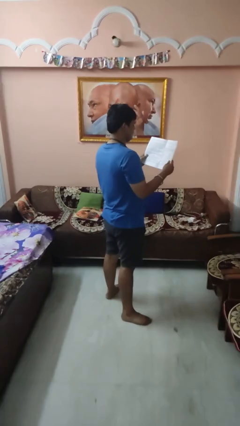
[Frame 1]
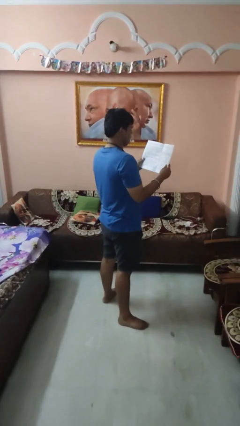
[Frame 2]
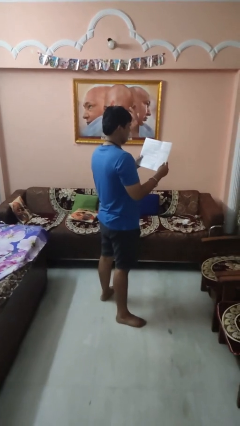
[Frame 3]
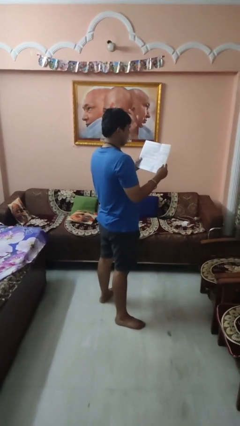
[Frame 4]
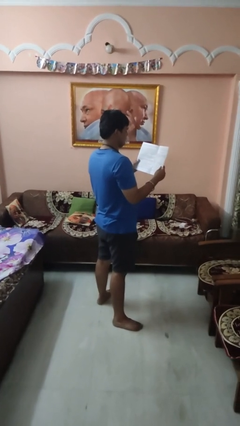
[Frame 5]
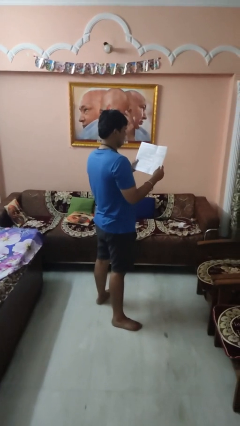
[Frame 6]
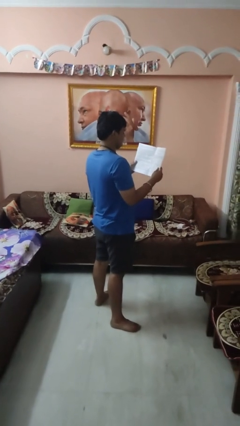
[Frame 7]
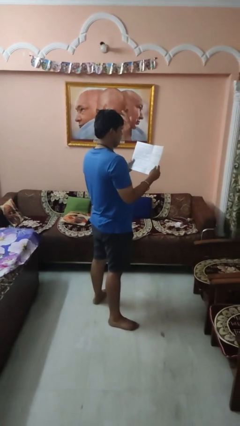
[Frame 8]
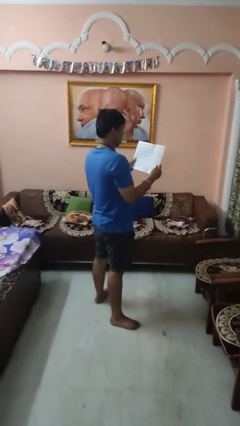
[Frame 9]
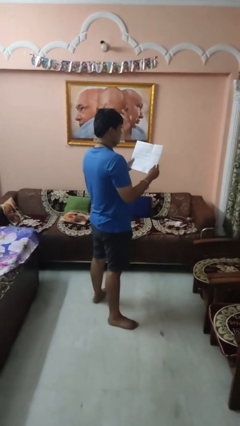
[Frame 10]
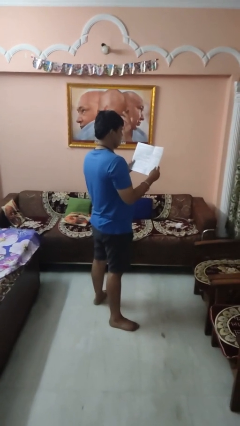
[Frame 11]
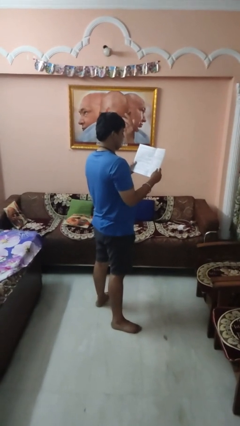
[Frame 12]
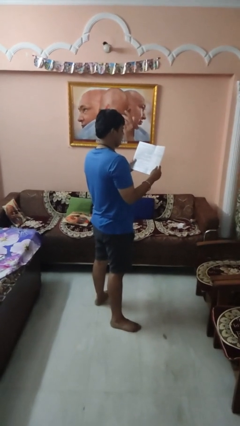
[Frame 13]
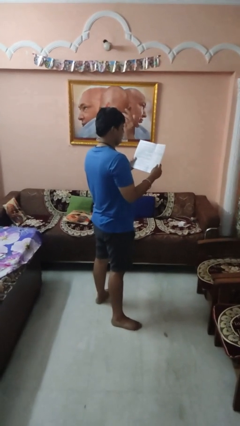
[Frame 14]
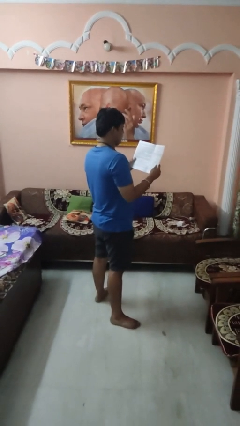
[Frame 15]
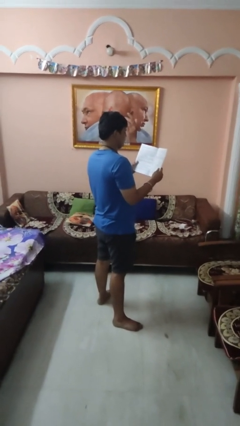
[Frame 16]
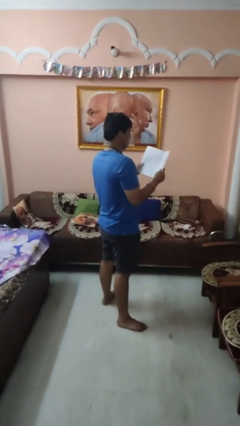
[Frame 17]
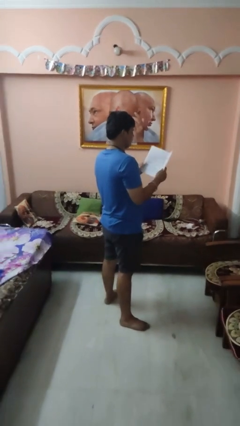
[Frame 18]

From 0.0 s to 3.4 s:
person reads magazine

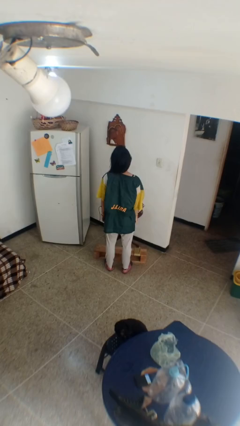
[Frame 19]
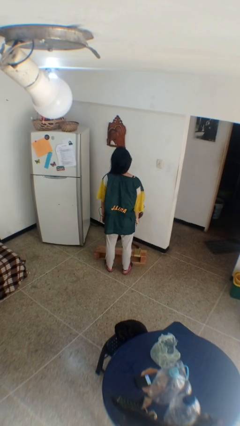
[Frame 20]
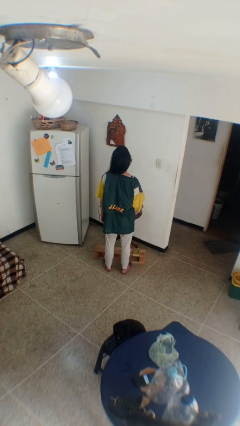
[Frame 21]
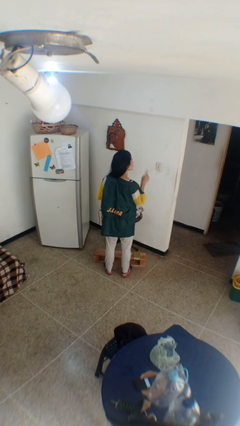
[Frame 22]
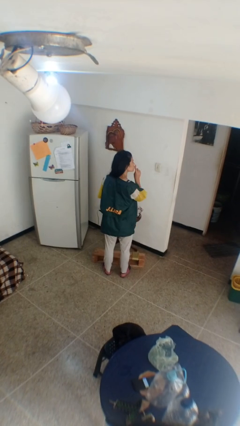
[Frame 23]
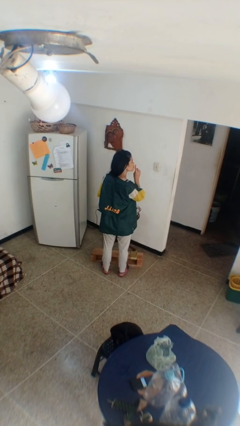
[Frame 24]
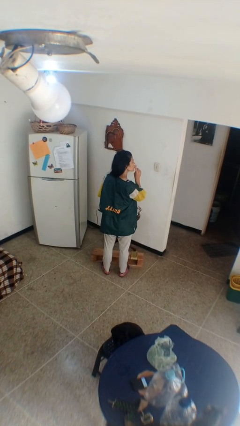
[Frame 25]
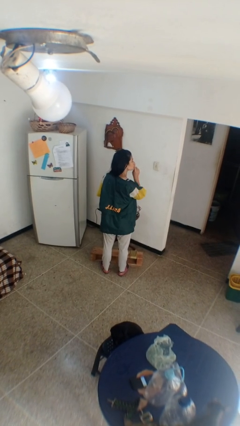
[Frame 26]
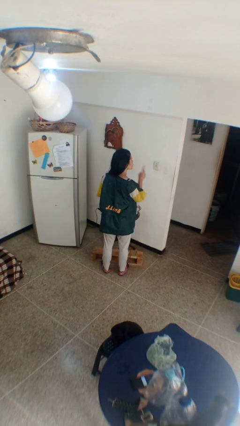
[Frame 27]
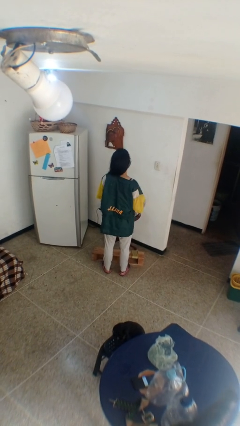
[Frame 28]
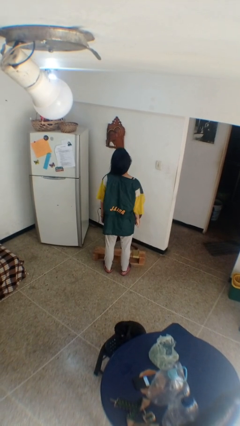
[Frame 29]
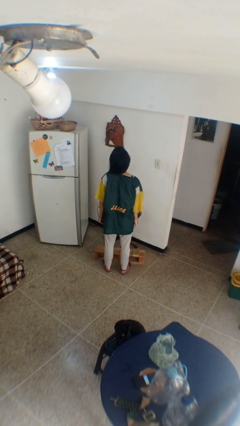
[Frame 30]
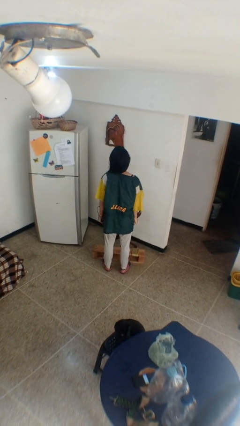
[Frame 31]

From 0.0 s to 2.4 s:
person gestures be quiet

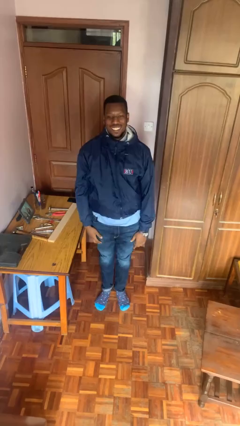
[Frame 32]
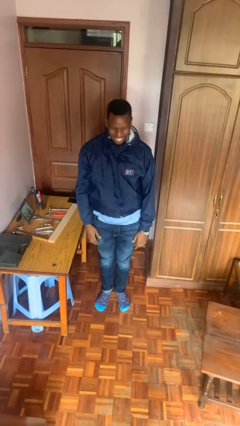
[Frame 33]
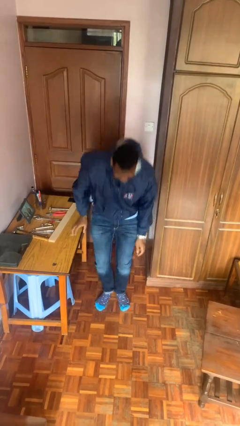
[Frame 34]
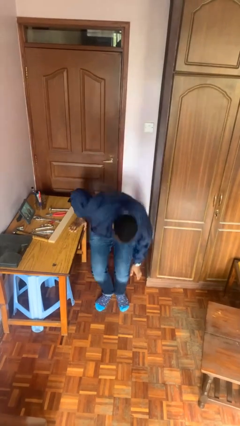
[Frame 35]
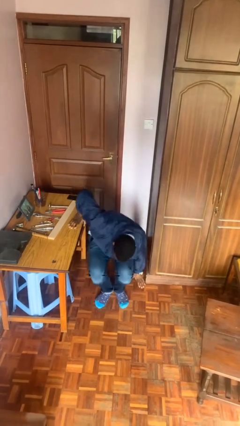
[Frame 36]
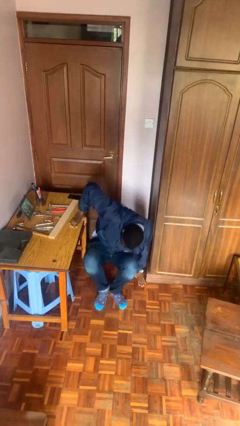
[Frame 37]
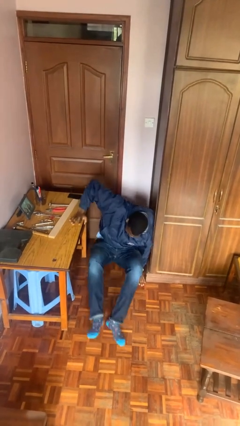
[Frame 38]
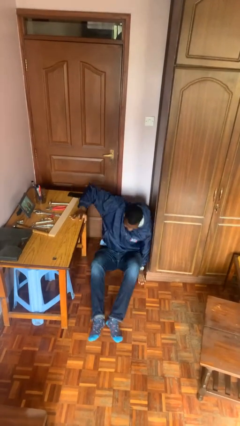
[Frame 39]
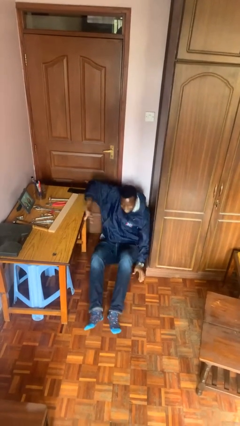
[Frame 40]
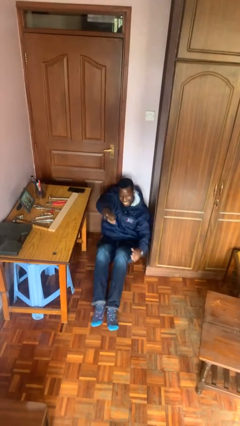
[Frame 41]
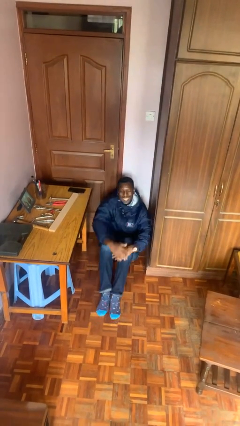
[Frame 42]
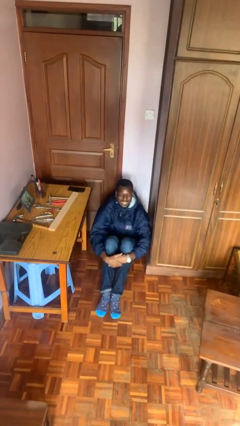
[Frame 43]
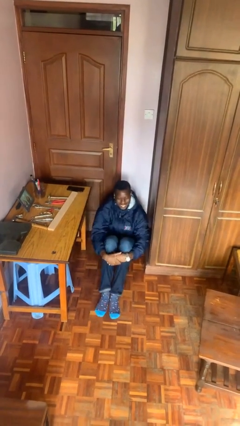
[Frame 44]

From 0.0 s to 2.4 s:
person sits down

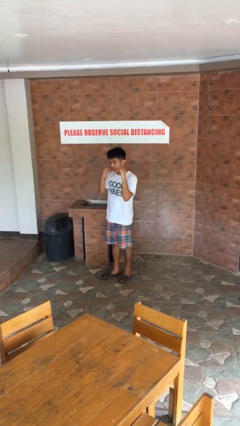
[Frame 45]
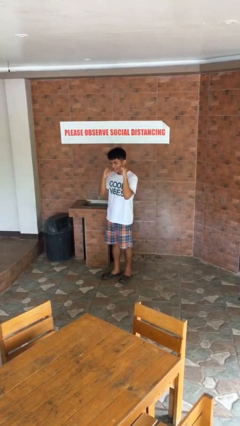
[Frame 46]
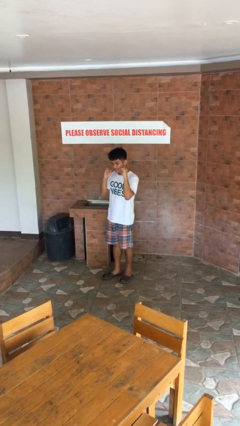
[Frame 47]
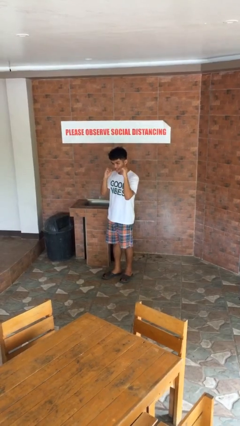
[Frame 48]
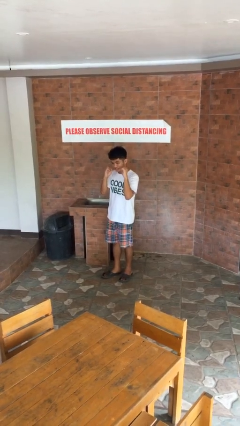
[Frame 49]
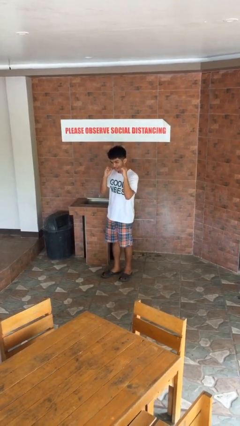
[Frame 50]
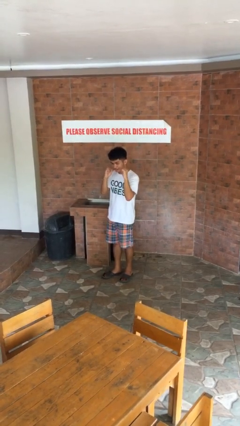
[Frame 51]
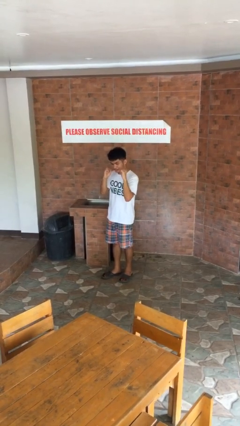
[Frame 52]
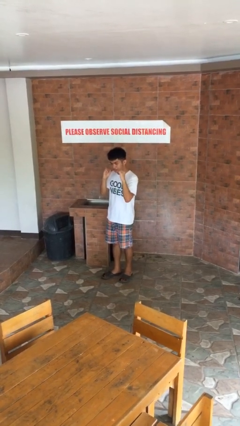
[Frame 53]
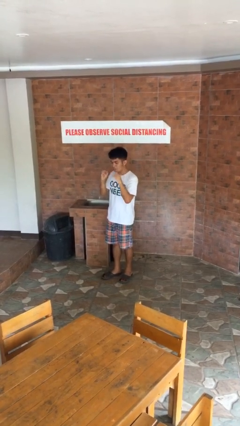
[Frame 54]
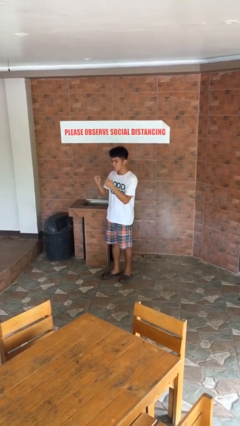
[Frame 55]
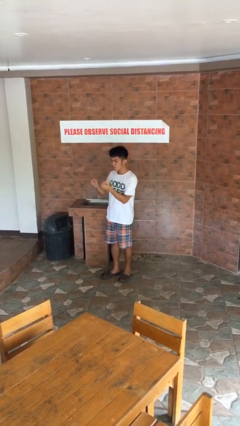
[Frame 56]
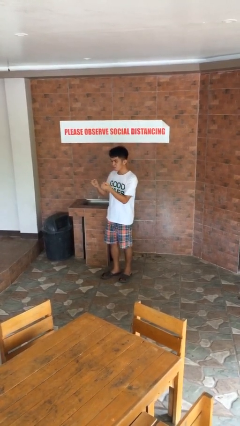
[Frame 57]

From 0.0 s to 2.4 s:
person flosses

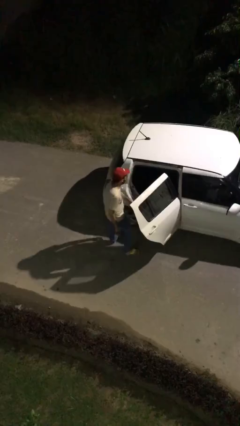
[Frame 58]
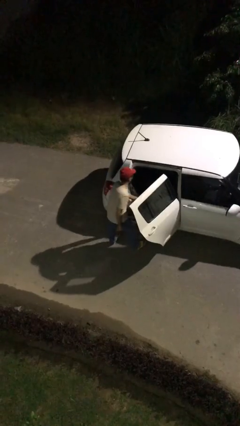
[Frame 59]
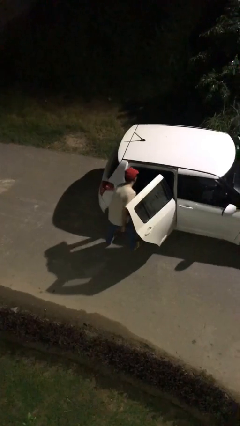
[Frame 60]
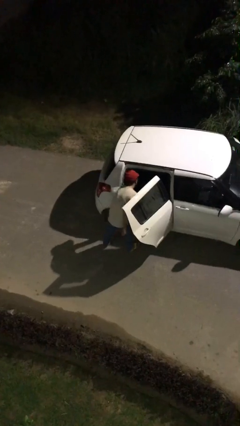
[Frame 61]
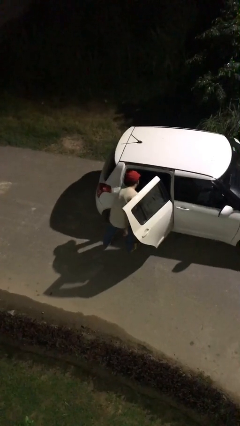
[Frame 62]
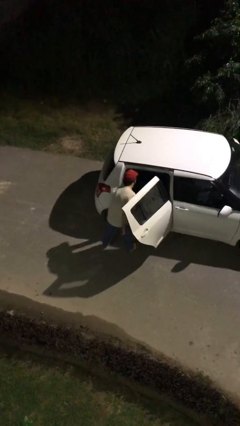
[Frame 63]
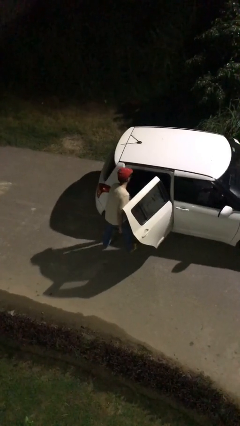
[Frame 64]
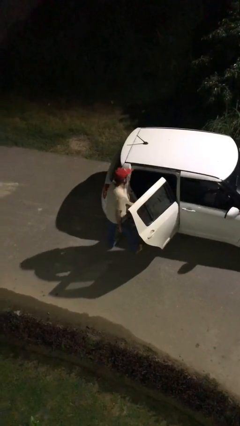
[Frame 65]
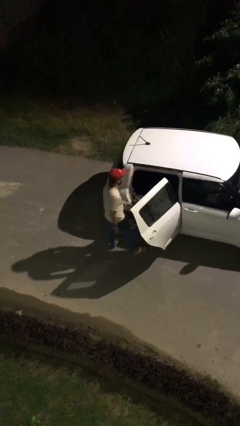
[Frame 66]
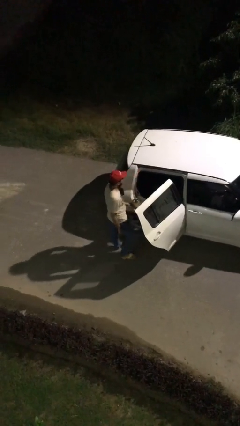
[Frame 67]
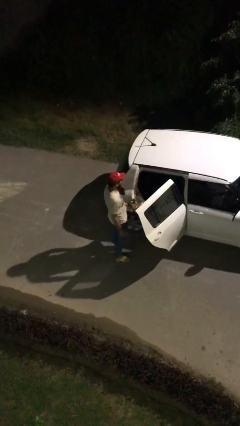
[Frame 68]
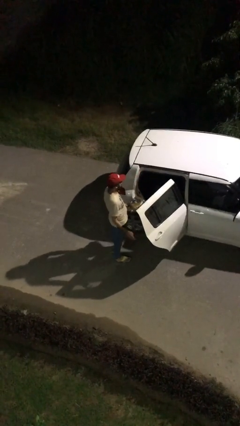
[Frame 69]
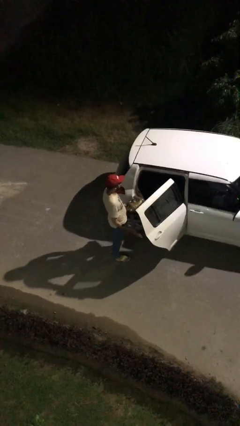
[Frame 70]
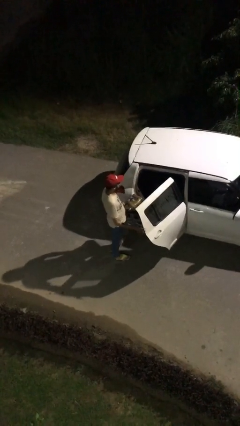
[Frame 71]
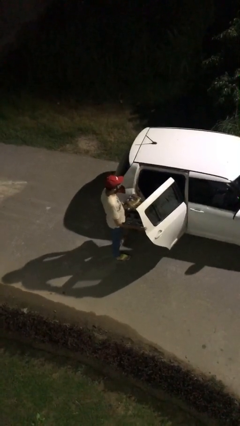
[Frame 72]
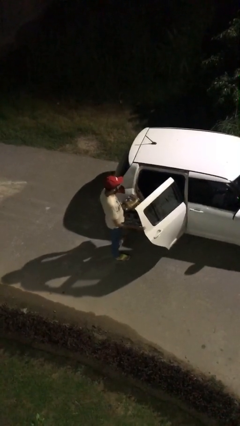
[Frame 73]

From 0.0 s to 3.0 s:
person unloads car

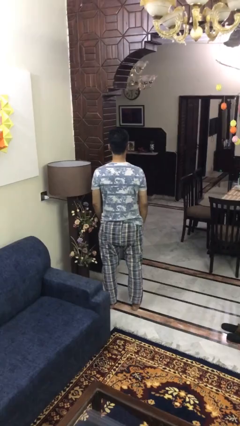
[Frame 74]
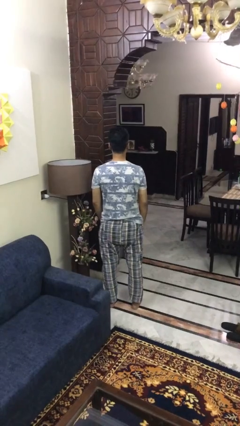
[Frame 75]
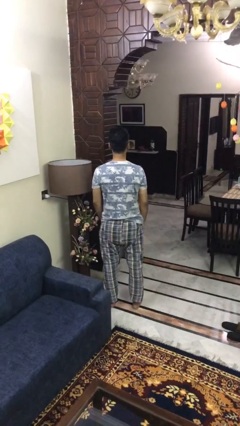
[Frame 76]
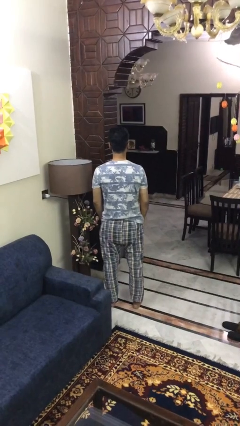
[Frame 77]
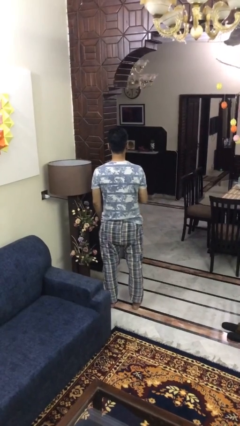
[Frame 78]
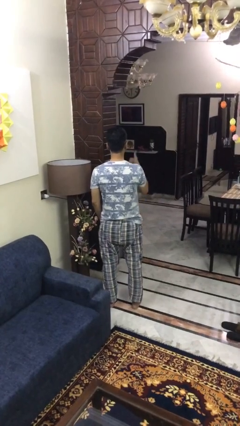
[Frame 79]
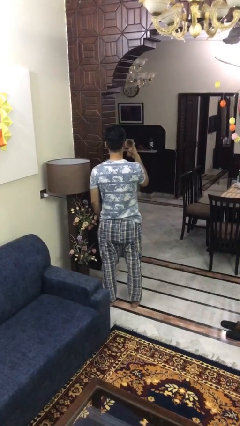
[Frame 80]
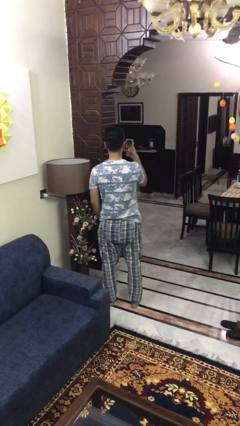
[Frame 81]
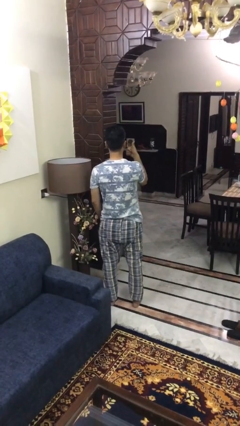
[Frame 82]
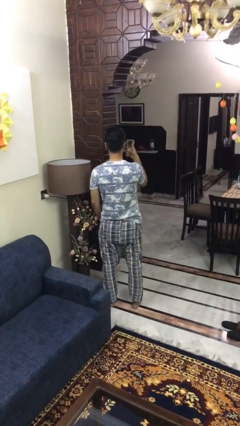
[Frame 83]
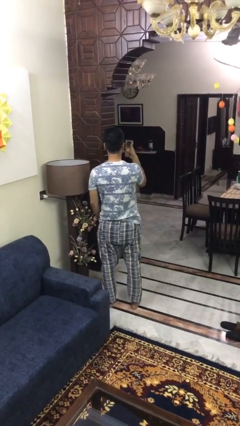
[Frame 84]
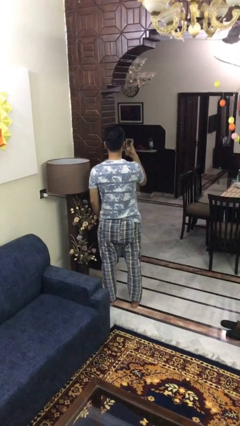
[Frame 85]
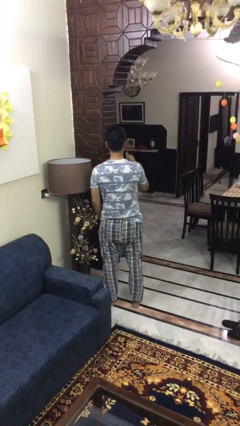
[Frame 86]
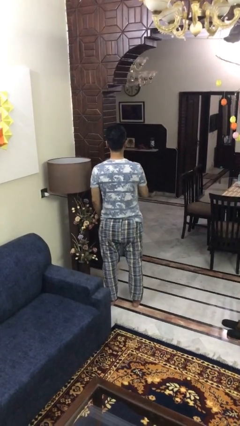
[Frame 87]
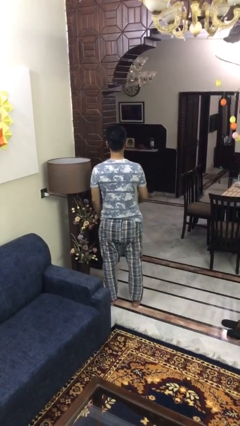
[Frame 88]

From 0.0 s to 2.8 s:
person gestures thumbs up

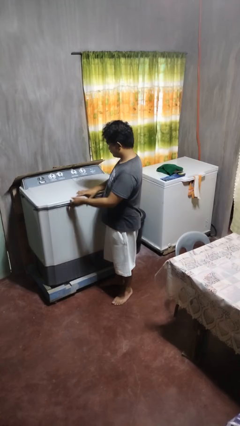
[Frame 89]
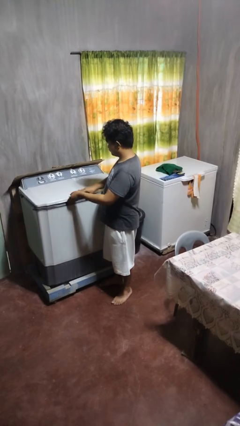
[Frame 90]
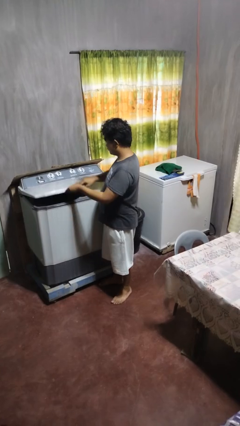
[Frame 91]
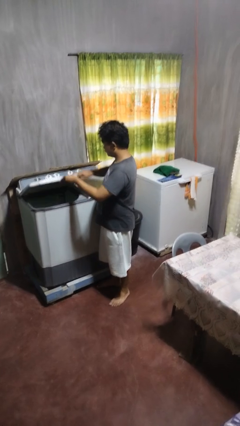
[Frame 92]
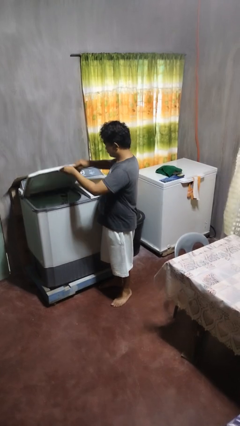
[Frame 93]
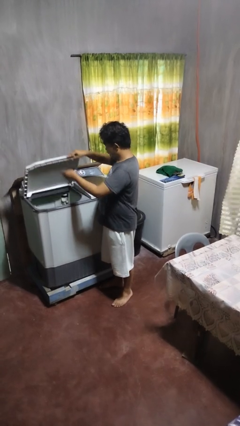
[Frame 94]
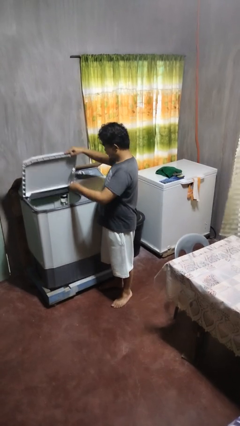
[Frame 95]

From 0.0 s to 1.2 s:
person opens clothes washer
